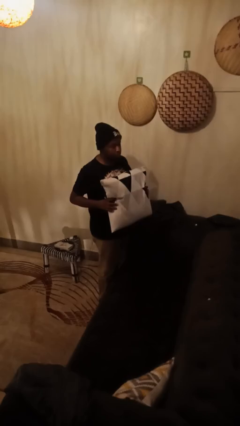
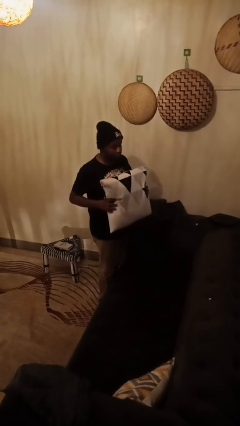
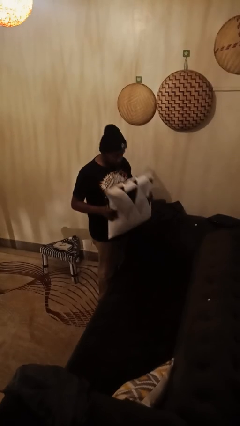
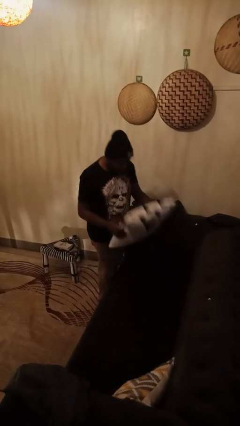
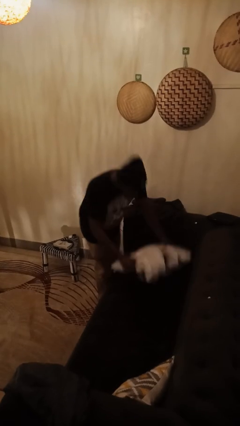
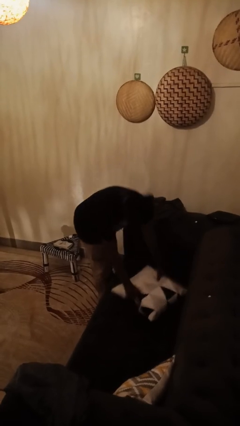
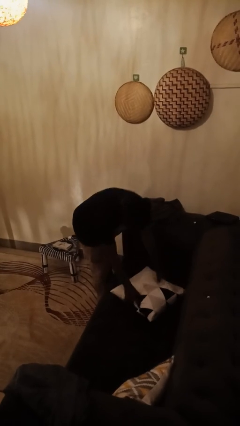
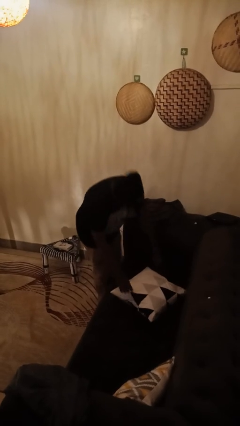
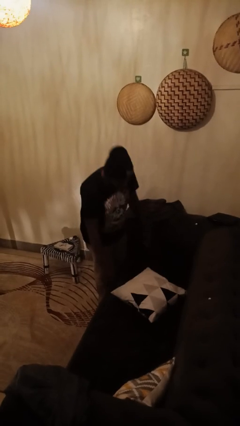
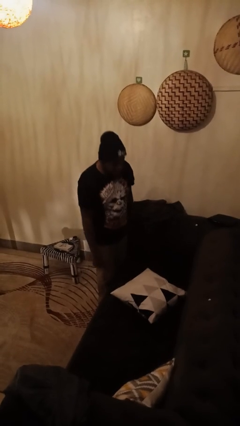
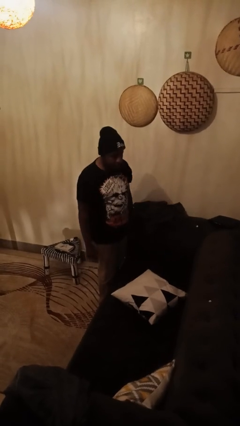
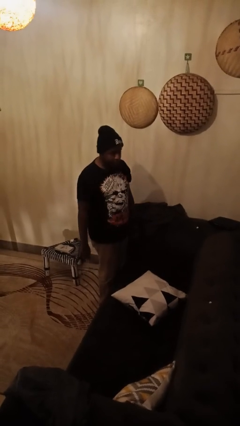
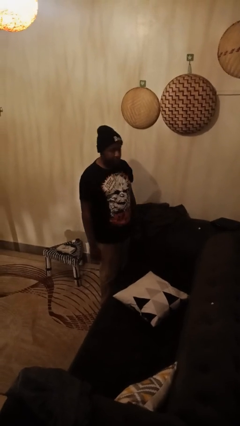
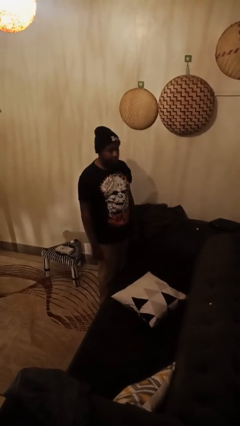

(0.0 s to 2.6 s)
person puts down object on couch

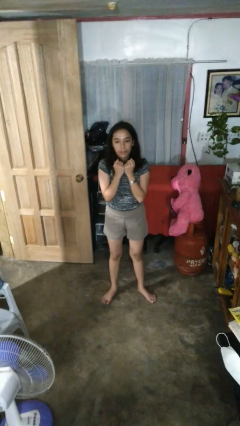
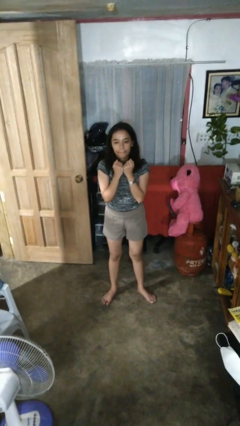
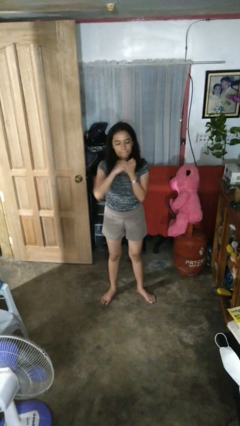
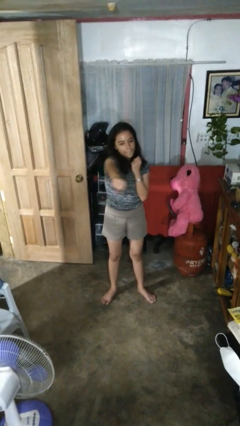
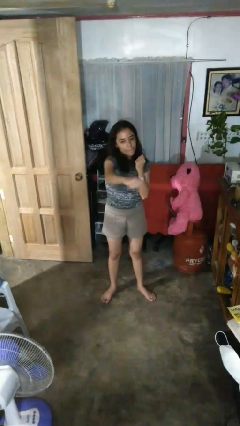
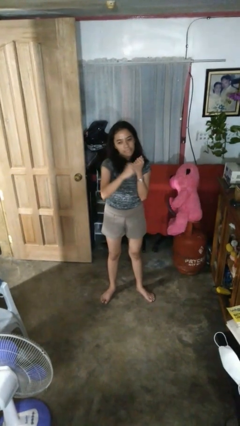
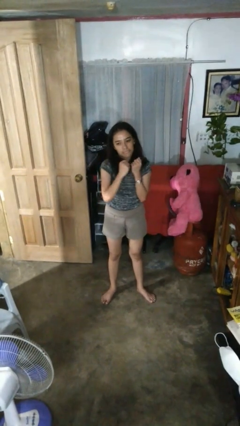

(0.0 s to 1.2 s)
person punches

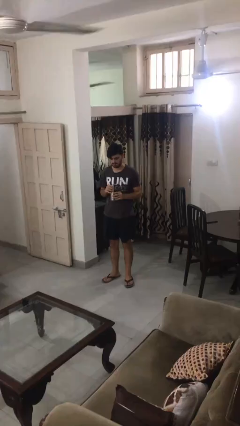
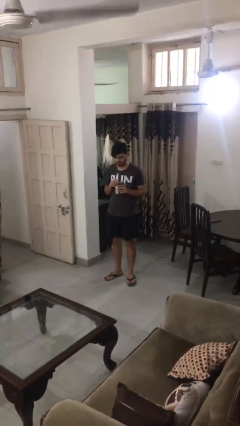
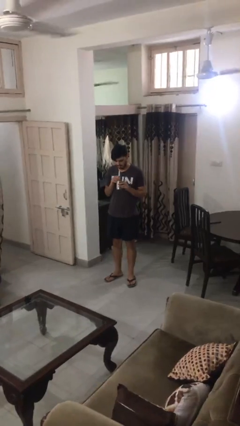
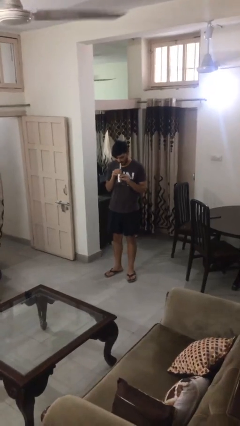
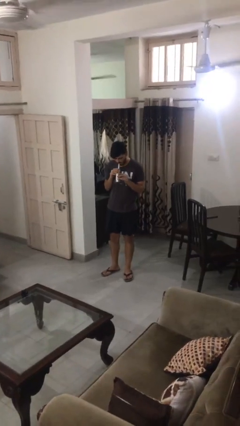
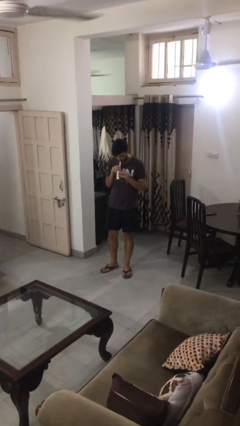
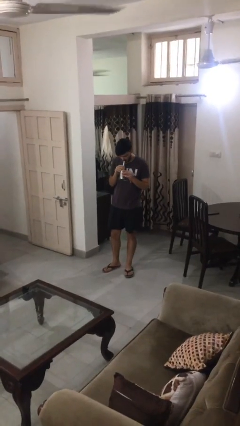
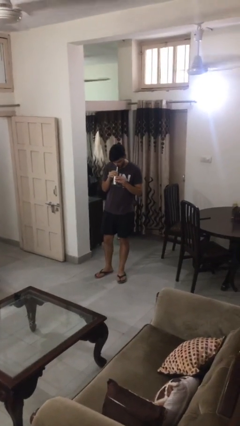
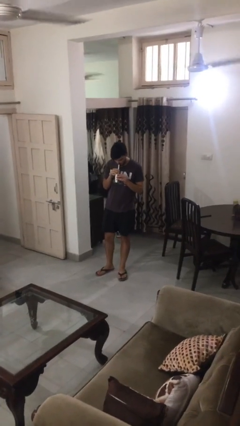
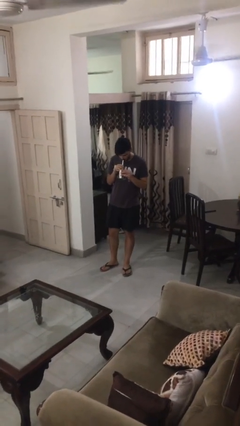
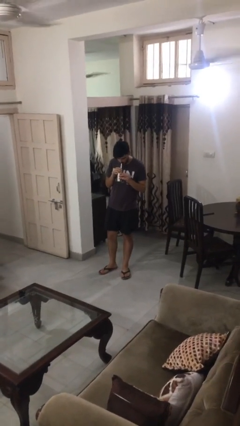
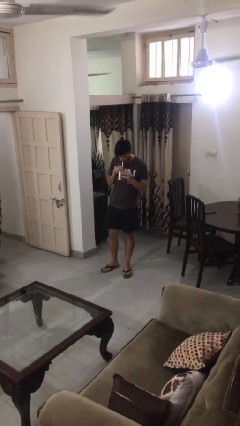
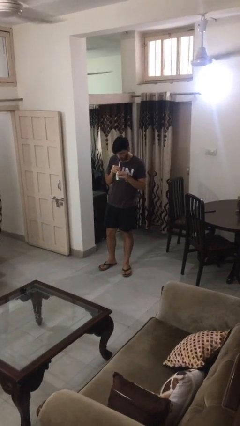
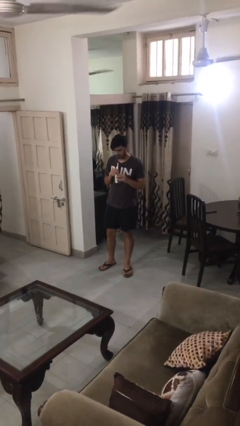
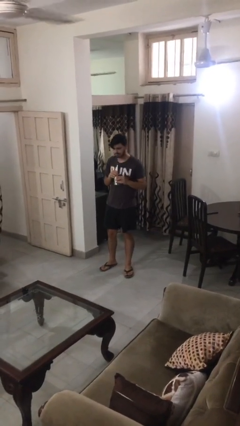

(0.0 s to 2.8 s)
person drinks from straw

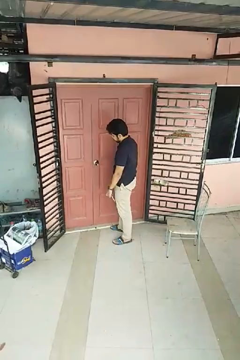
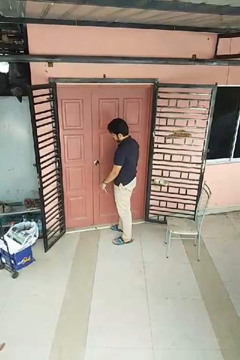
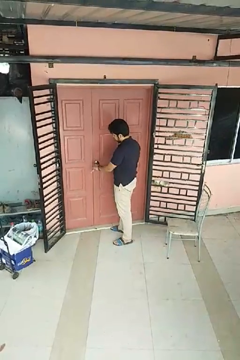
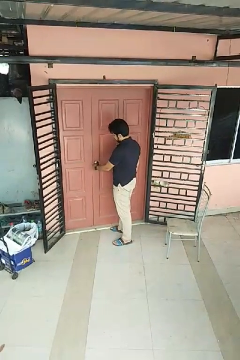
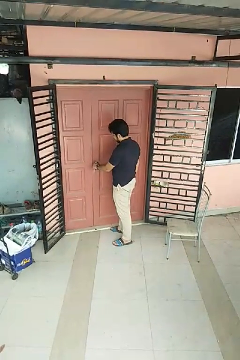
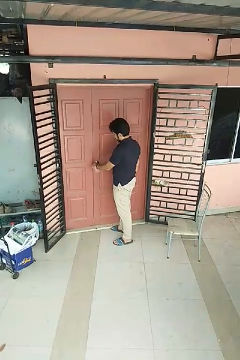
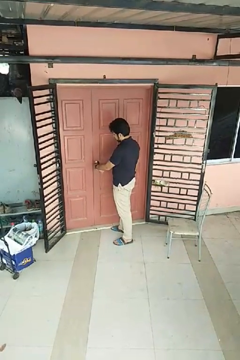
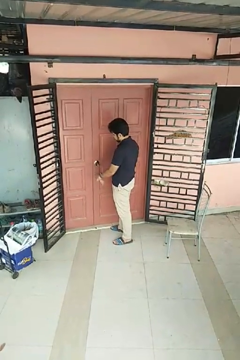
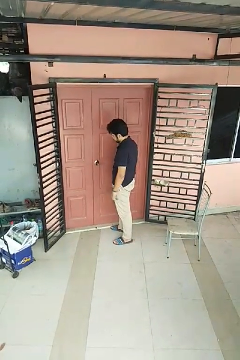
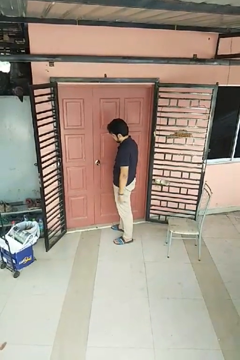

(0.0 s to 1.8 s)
person unlocks door with keys

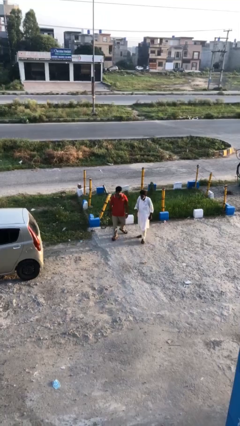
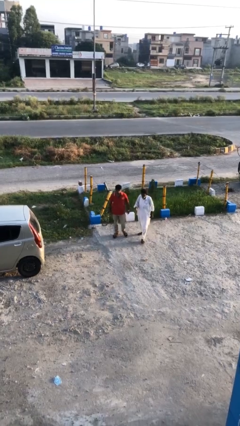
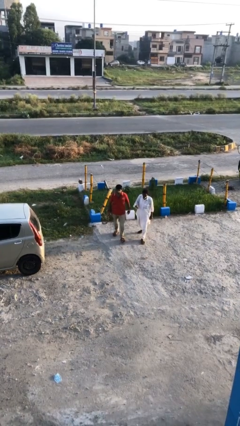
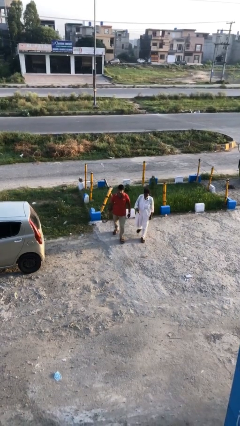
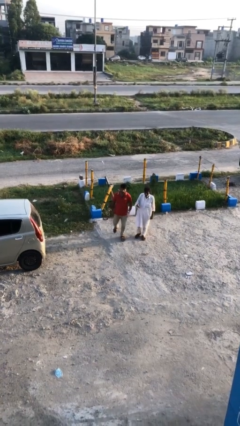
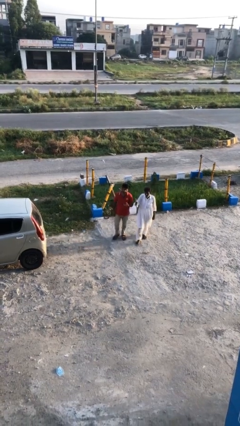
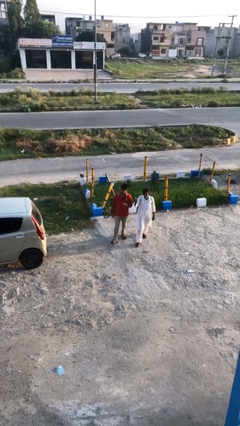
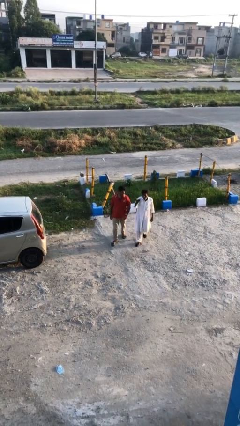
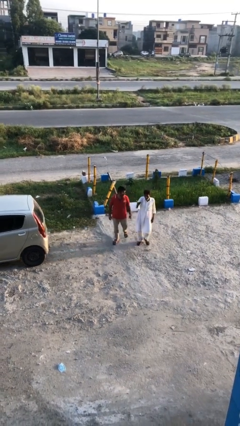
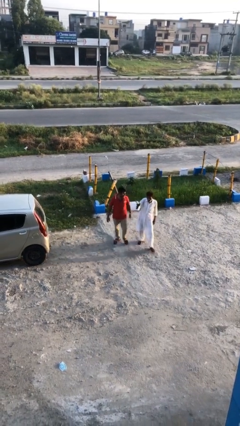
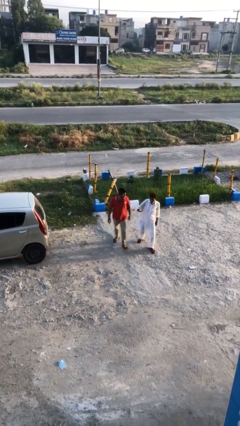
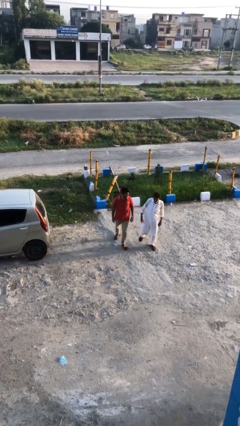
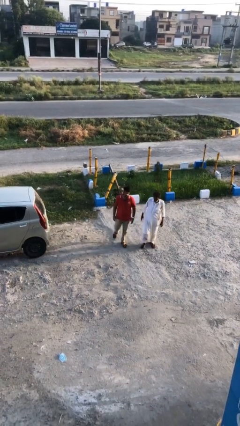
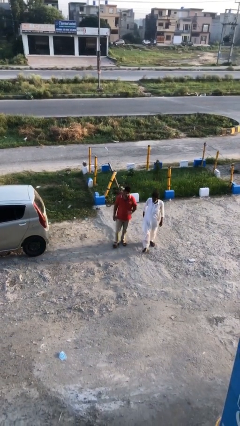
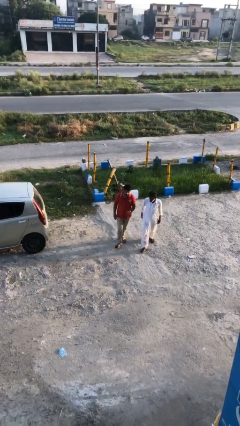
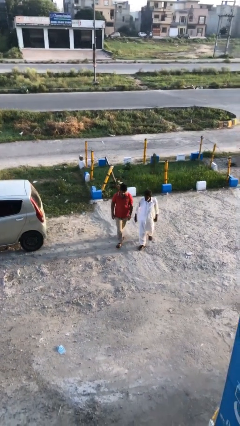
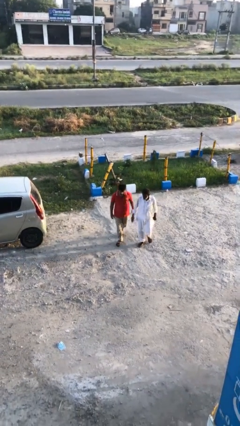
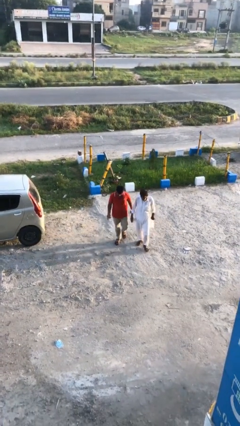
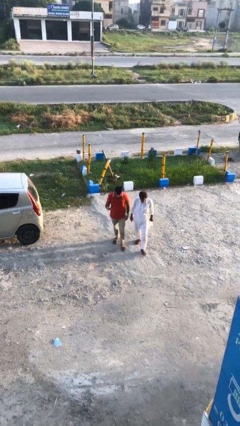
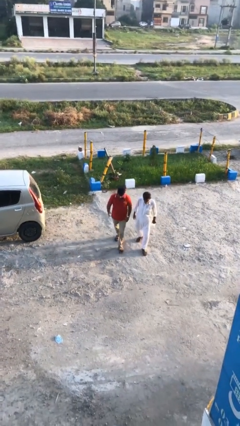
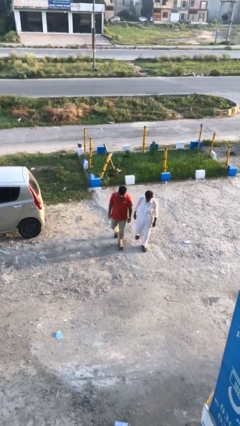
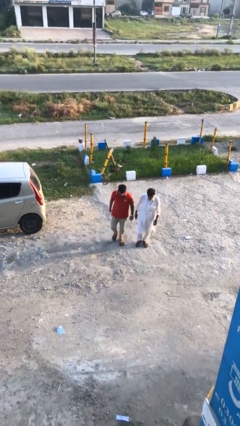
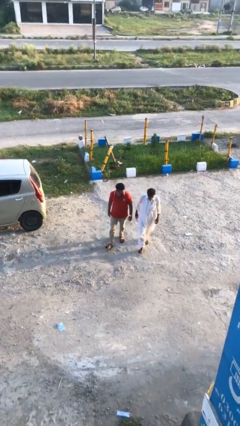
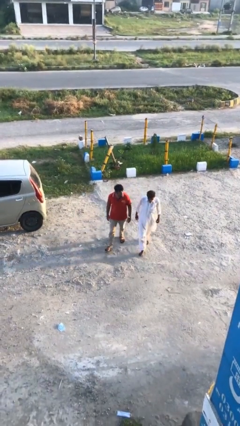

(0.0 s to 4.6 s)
person talks to person

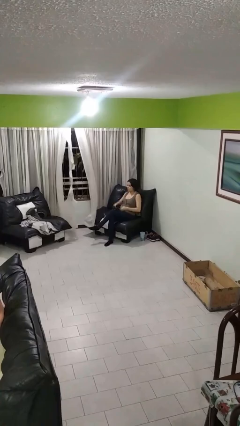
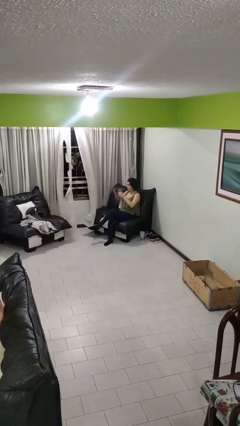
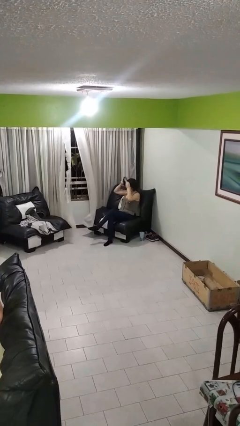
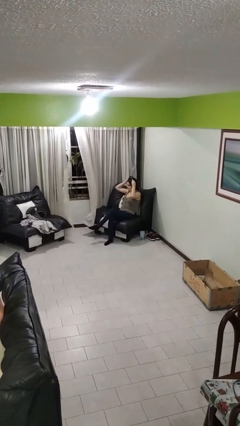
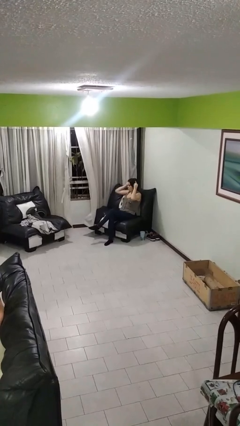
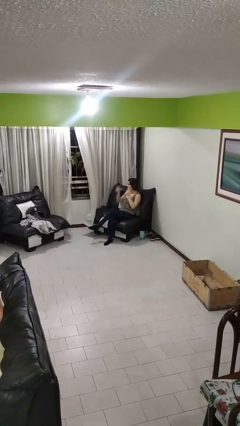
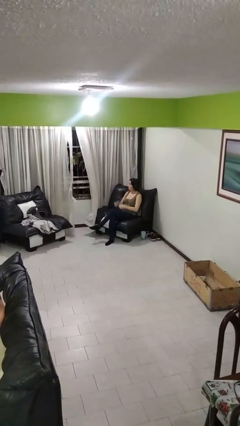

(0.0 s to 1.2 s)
person puts on headphones

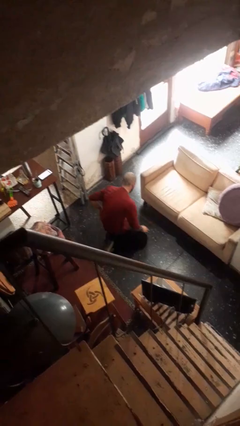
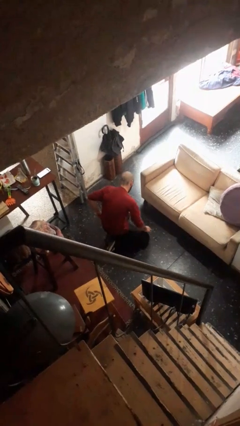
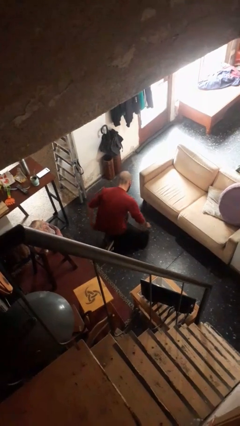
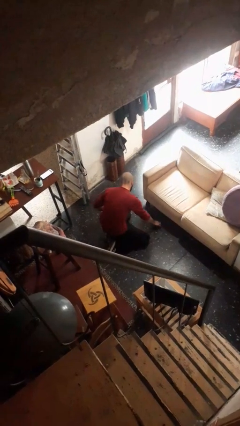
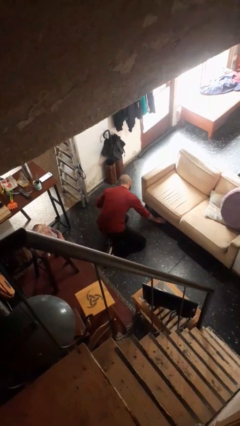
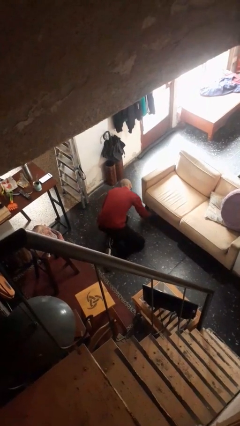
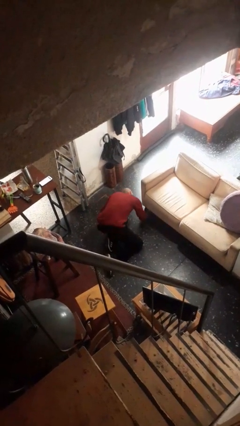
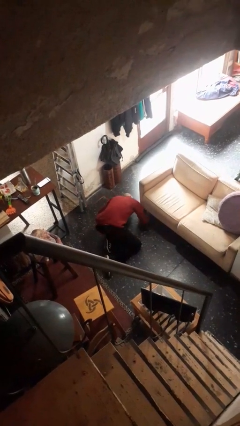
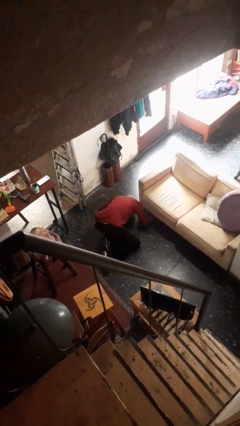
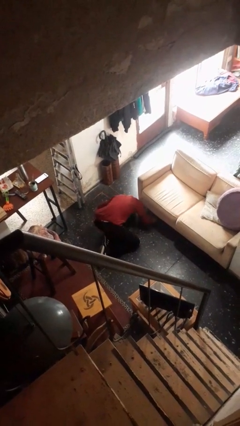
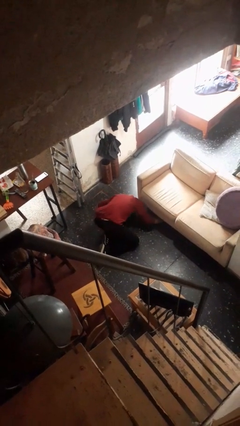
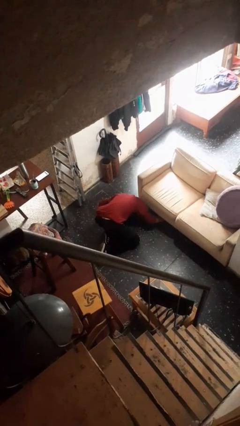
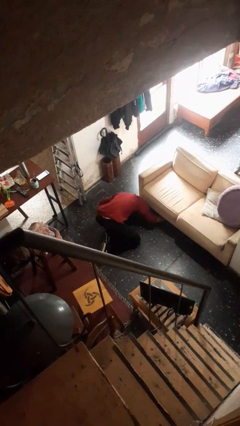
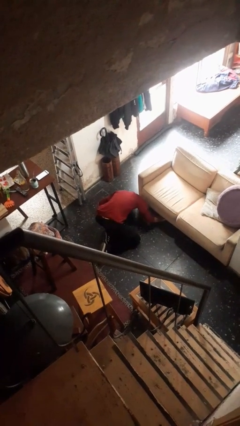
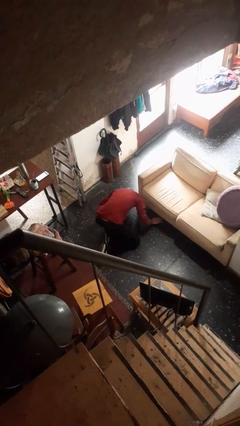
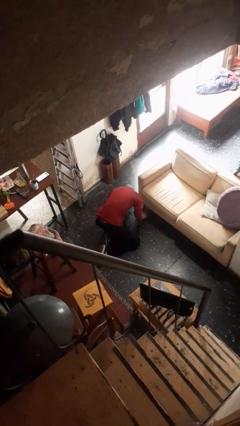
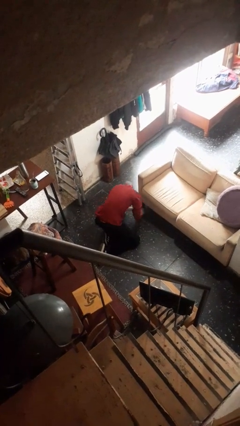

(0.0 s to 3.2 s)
person searches under couch
